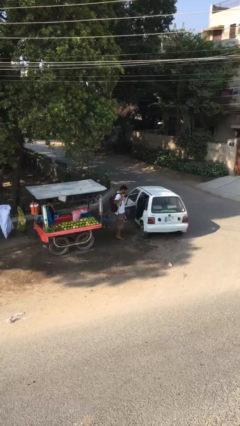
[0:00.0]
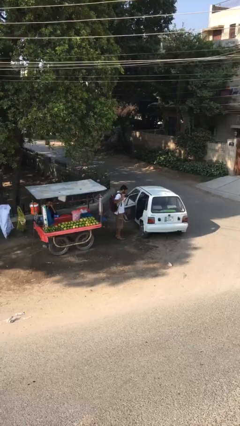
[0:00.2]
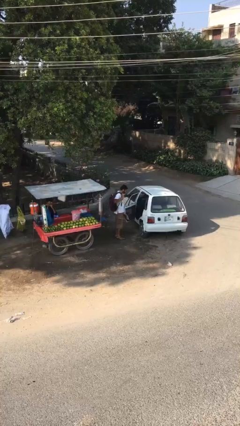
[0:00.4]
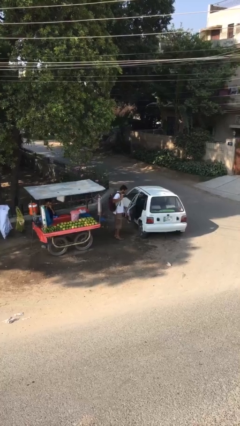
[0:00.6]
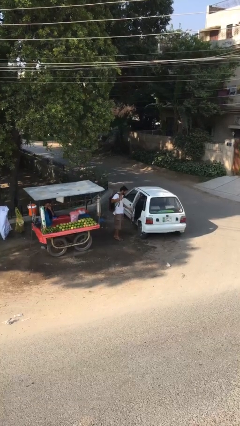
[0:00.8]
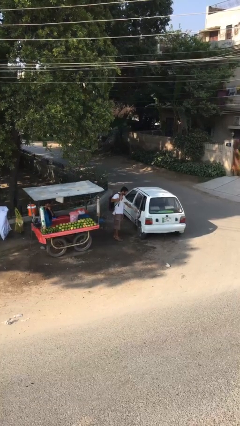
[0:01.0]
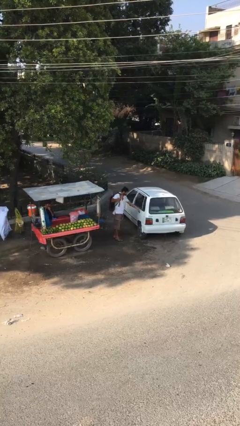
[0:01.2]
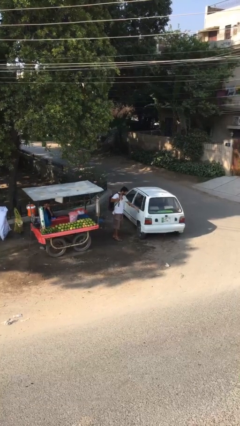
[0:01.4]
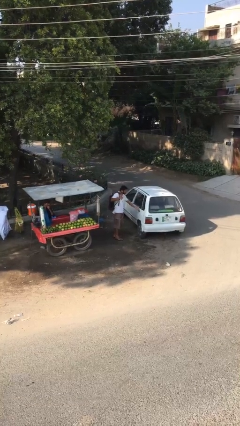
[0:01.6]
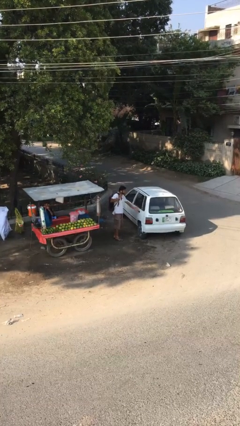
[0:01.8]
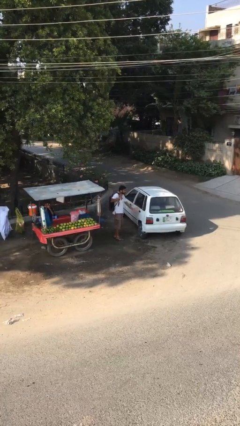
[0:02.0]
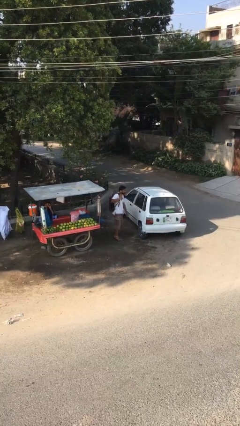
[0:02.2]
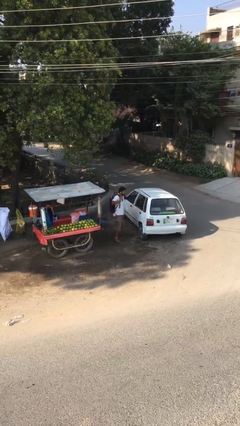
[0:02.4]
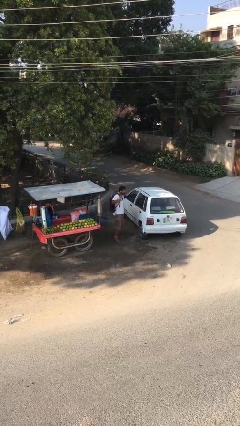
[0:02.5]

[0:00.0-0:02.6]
person closes car door

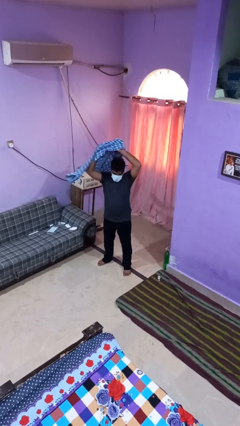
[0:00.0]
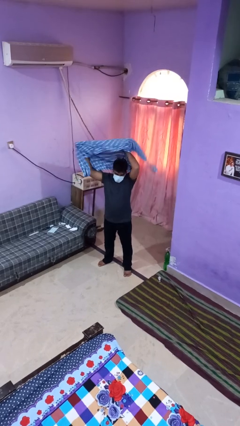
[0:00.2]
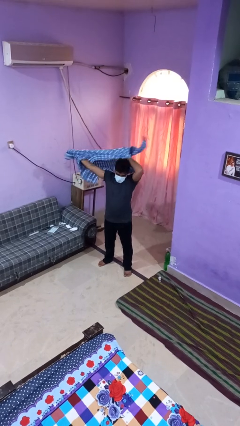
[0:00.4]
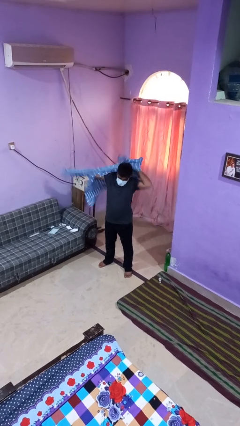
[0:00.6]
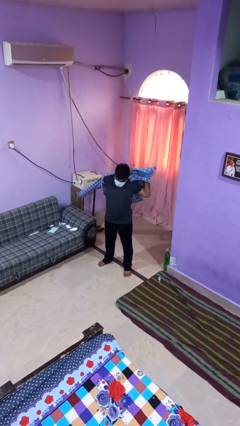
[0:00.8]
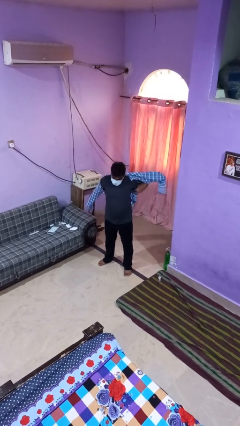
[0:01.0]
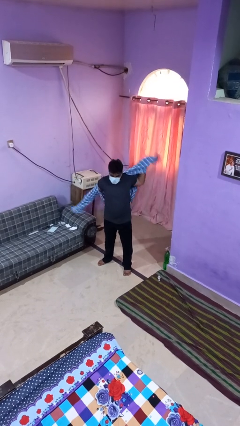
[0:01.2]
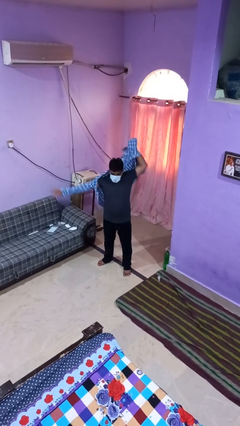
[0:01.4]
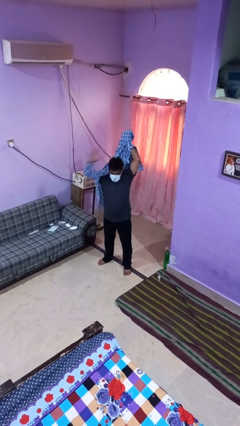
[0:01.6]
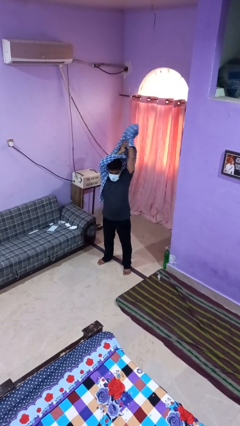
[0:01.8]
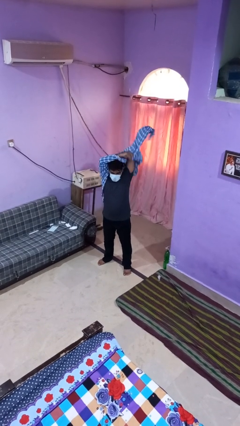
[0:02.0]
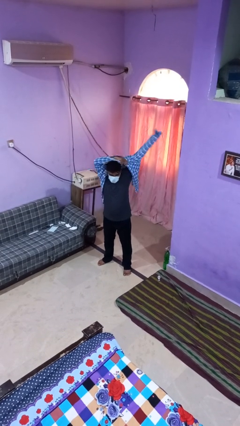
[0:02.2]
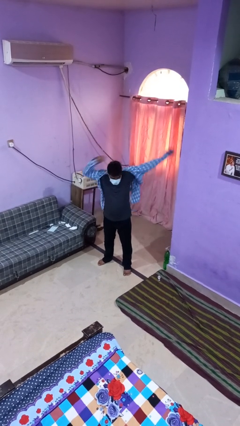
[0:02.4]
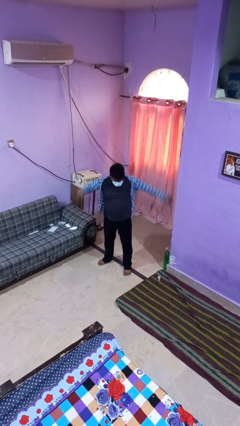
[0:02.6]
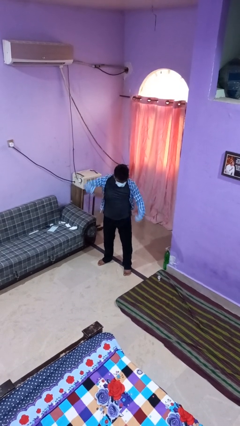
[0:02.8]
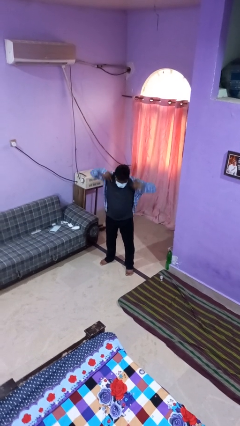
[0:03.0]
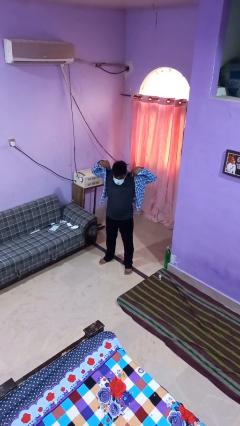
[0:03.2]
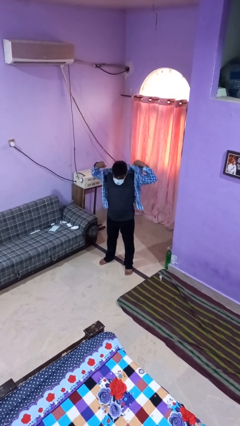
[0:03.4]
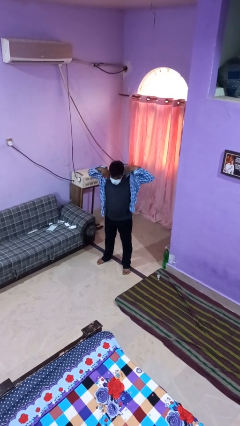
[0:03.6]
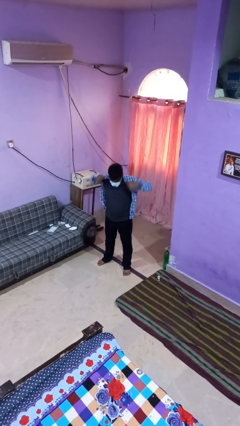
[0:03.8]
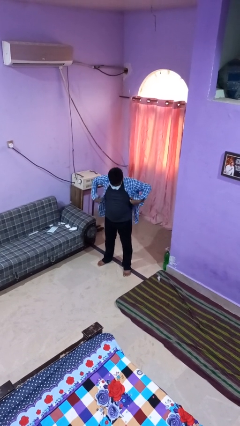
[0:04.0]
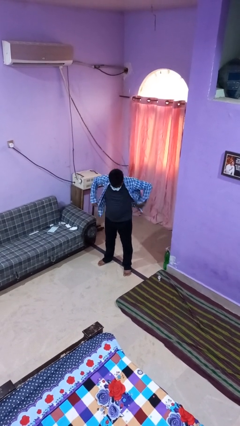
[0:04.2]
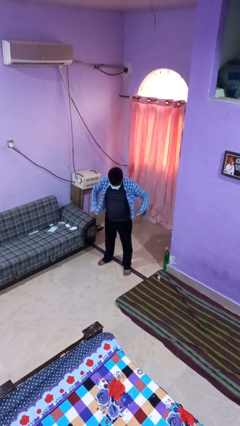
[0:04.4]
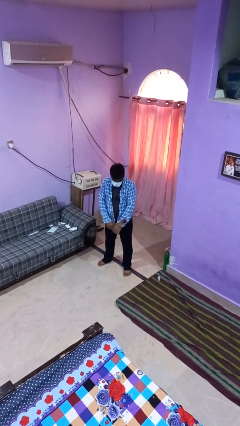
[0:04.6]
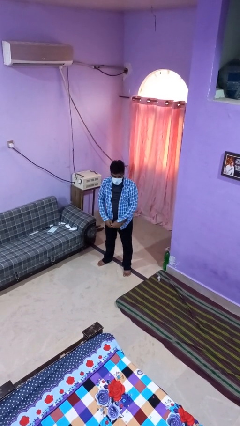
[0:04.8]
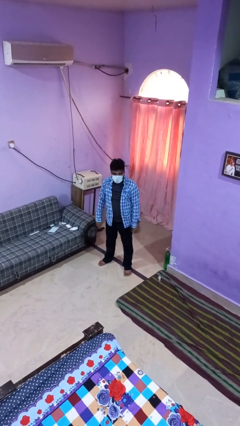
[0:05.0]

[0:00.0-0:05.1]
person puts on shirt

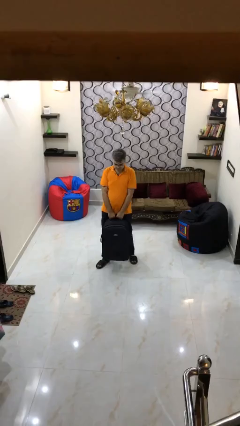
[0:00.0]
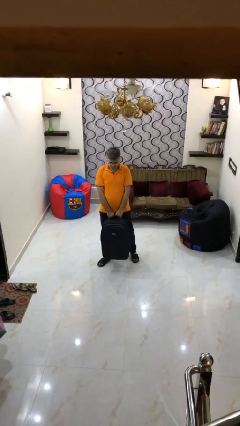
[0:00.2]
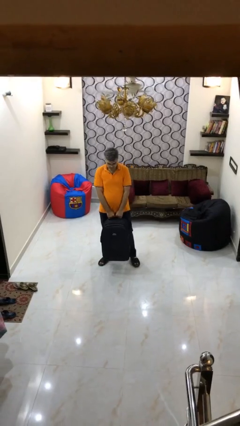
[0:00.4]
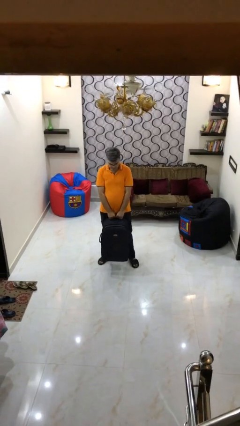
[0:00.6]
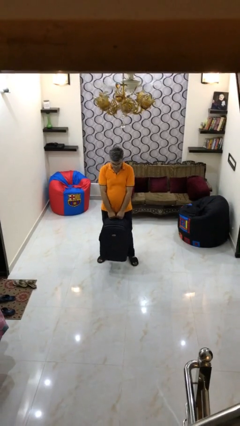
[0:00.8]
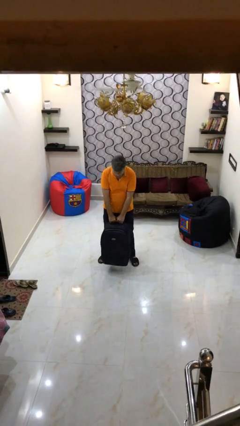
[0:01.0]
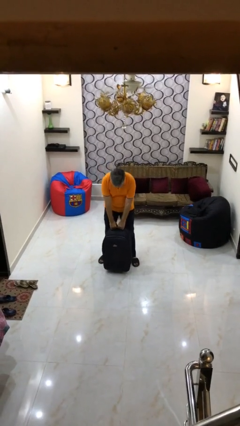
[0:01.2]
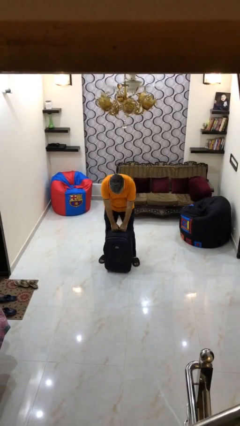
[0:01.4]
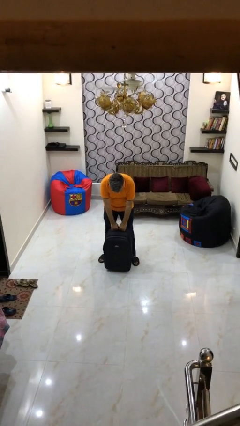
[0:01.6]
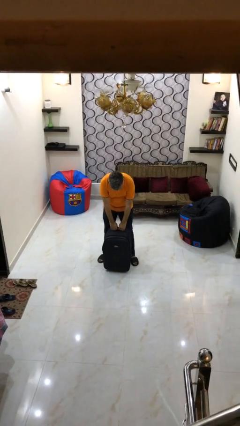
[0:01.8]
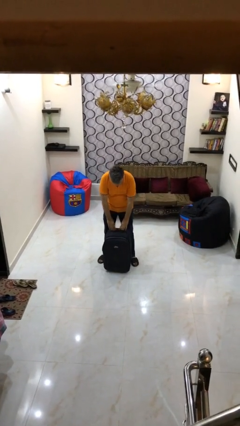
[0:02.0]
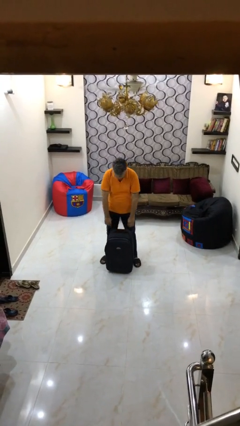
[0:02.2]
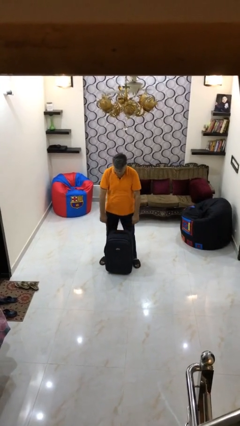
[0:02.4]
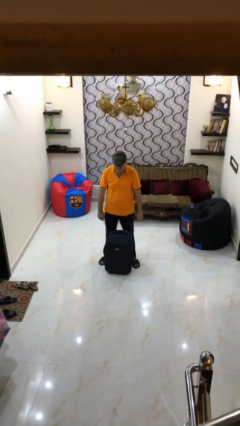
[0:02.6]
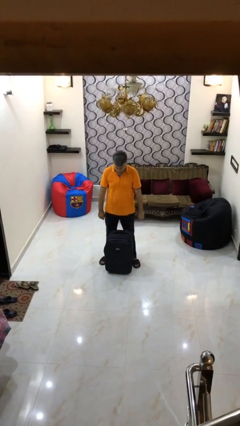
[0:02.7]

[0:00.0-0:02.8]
person puts down object on floor

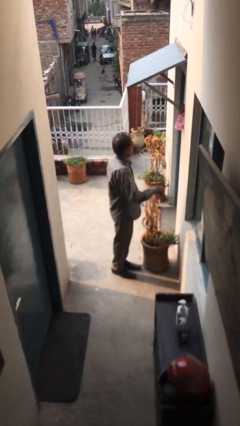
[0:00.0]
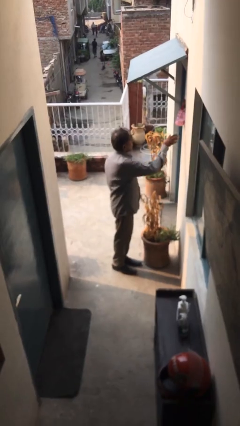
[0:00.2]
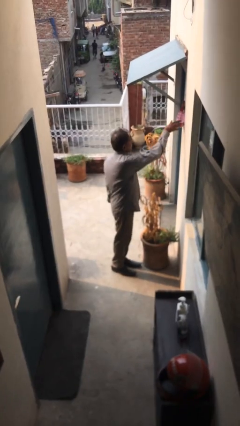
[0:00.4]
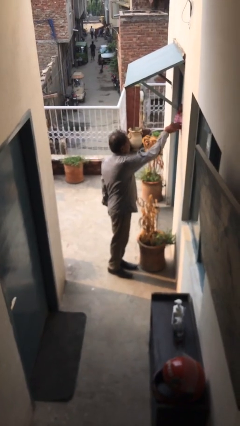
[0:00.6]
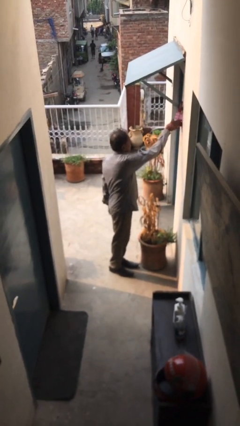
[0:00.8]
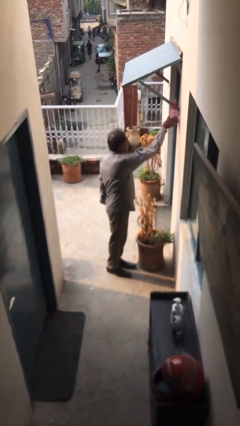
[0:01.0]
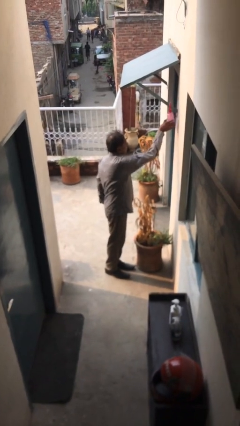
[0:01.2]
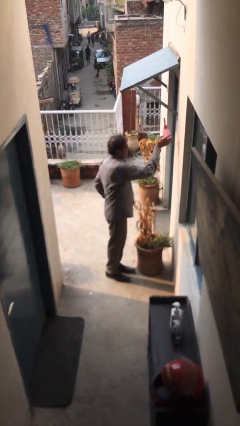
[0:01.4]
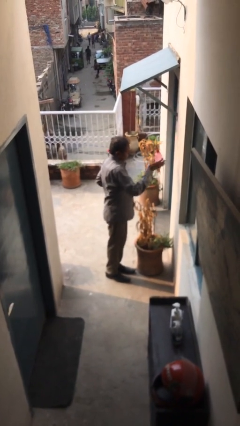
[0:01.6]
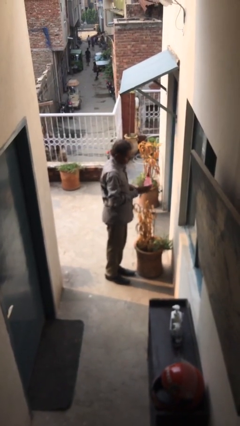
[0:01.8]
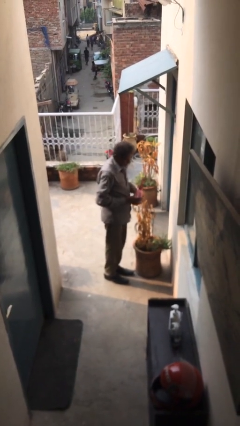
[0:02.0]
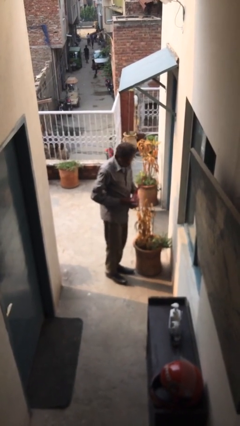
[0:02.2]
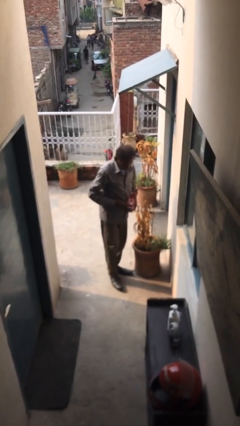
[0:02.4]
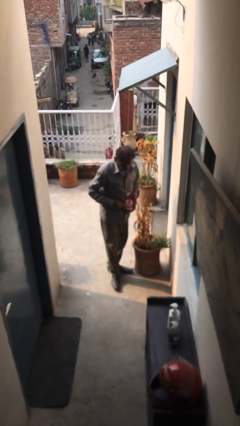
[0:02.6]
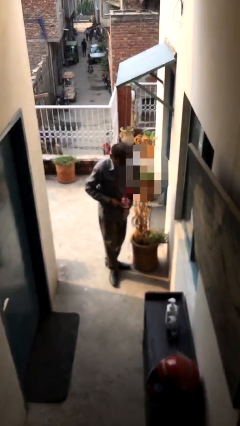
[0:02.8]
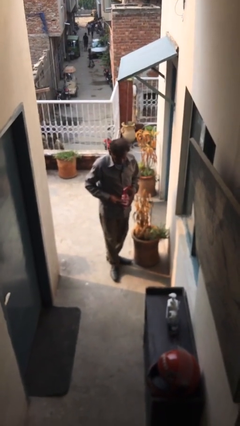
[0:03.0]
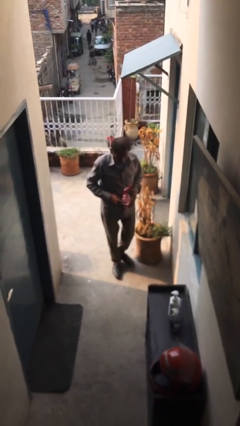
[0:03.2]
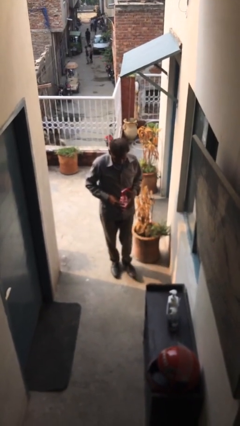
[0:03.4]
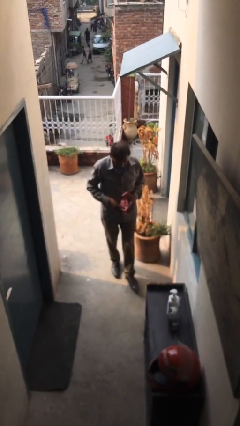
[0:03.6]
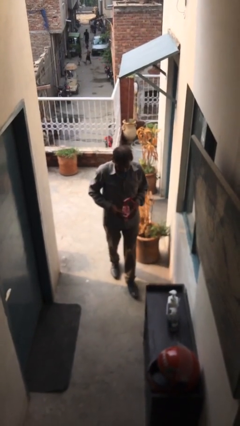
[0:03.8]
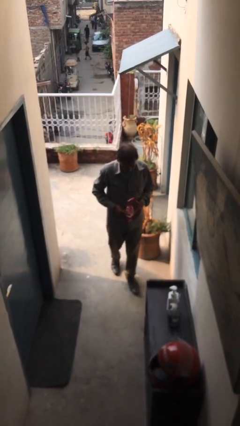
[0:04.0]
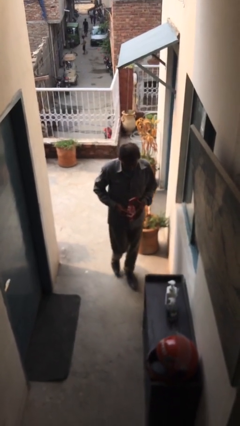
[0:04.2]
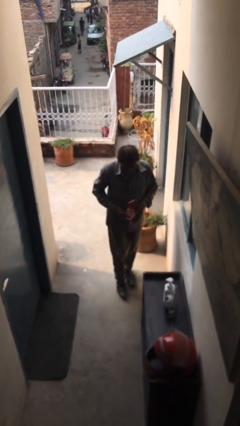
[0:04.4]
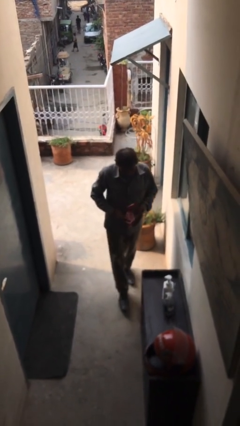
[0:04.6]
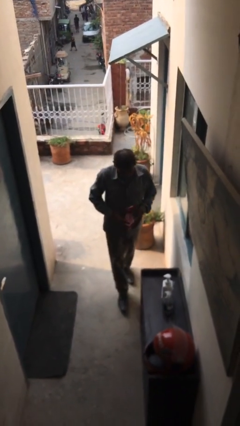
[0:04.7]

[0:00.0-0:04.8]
person picks up object from shelf

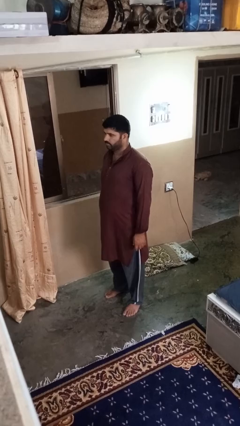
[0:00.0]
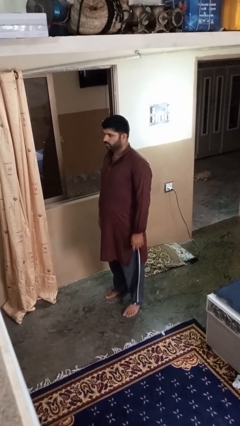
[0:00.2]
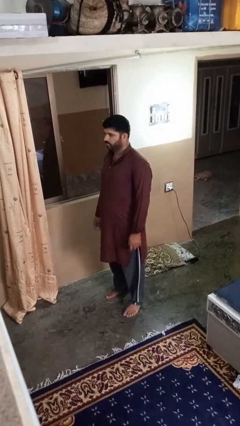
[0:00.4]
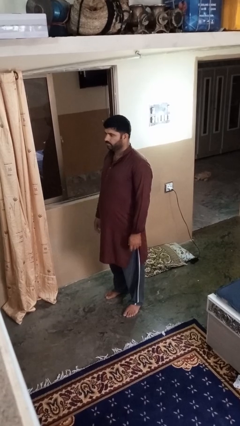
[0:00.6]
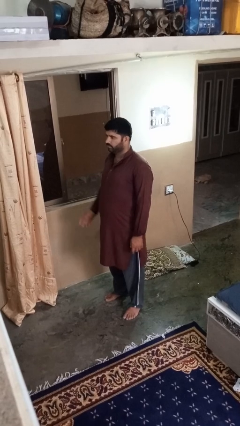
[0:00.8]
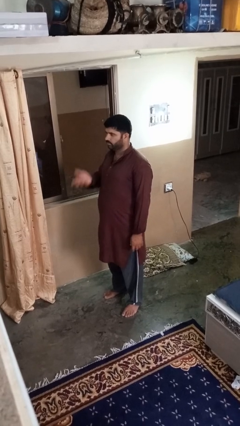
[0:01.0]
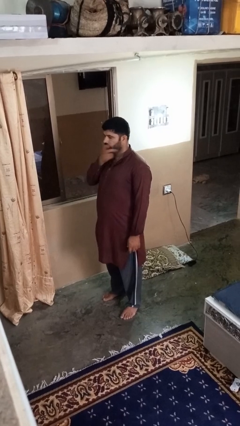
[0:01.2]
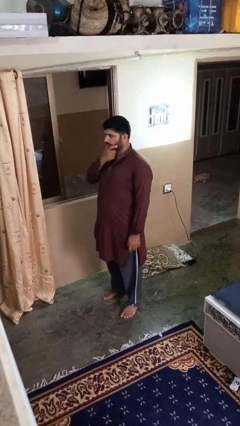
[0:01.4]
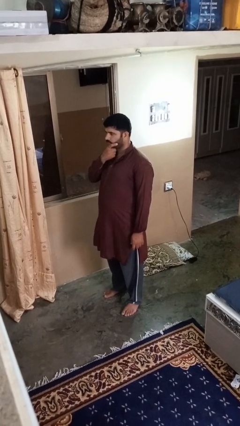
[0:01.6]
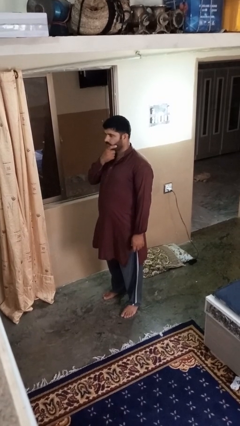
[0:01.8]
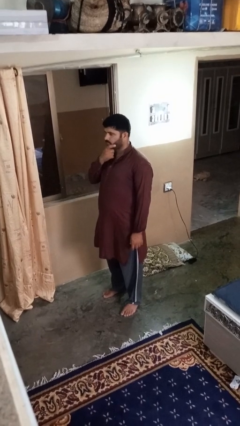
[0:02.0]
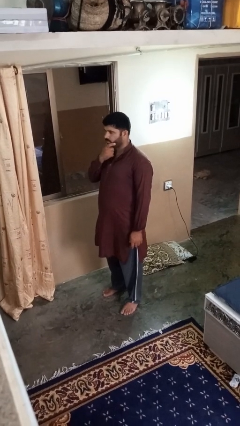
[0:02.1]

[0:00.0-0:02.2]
person strokes chin

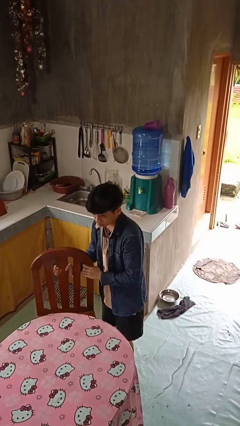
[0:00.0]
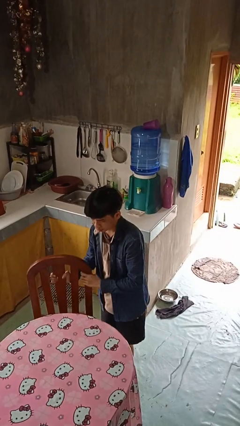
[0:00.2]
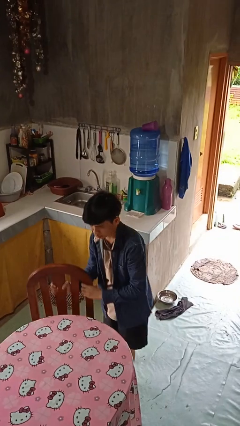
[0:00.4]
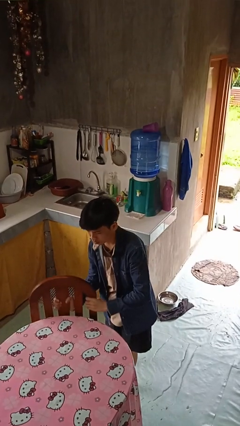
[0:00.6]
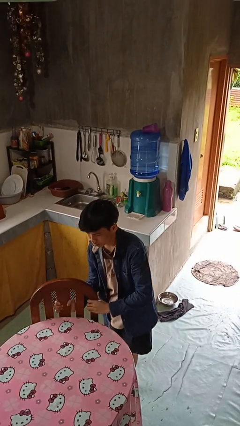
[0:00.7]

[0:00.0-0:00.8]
person pushes in chair
